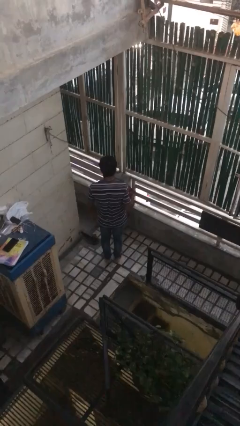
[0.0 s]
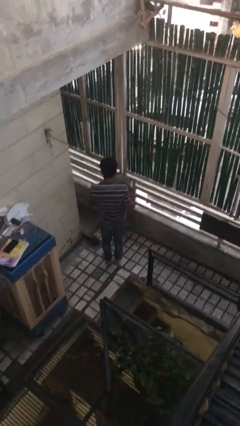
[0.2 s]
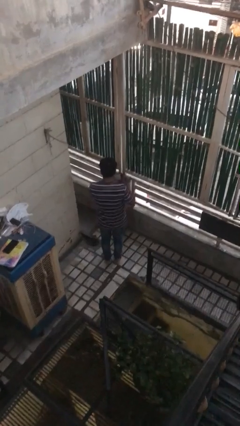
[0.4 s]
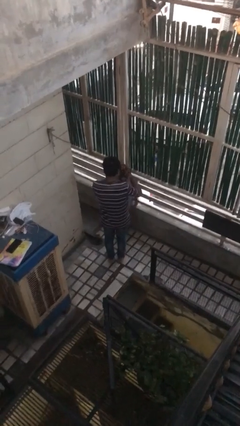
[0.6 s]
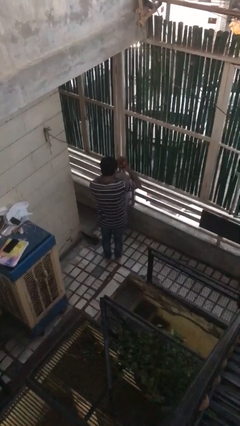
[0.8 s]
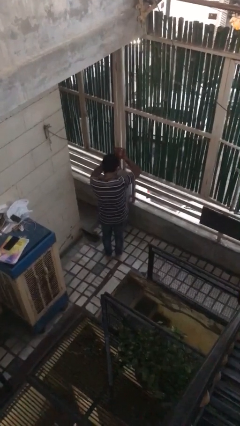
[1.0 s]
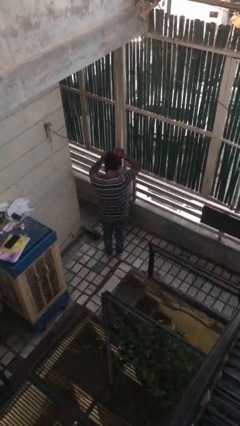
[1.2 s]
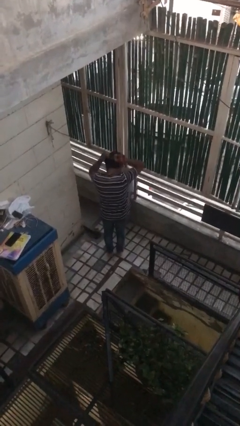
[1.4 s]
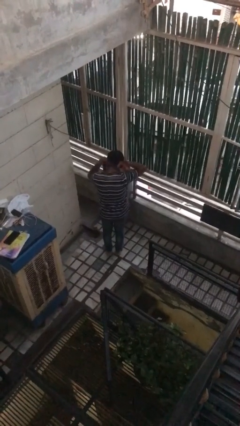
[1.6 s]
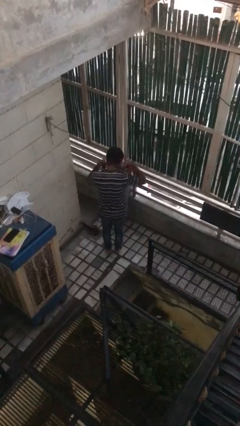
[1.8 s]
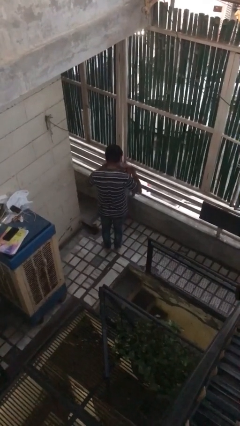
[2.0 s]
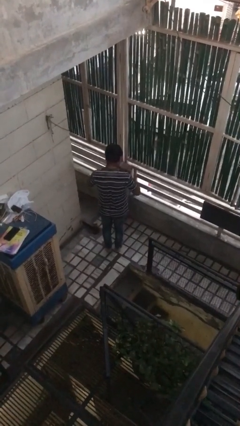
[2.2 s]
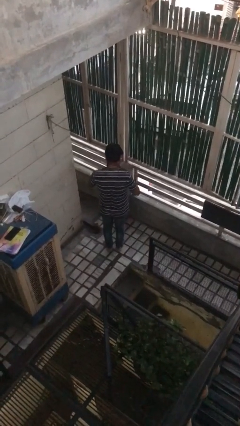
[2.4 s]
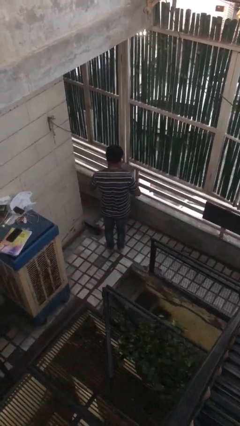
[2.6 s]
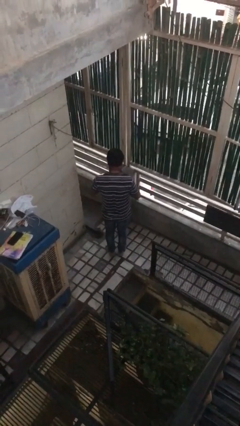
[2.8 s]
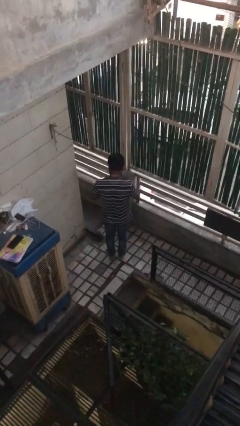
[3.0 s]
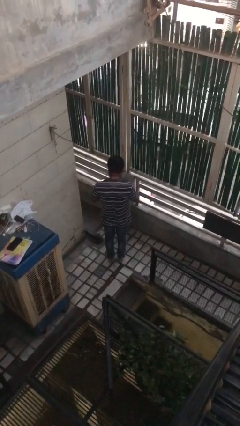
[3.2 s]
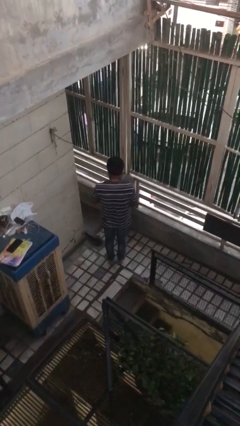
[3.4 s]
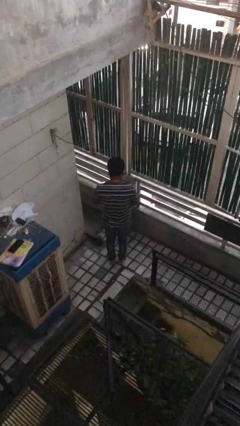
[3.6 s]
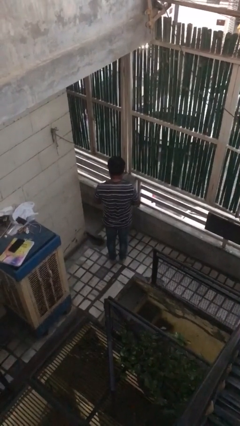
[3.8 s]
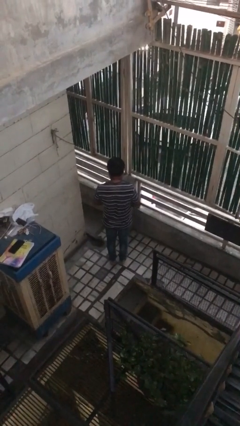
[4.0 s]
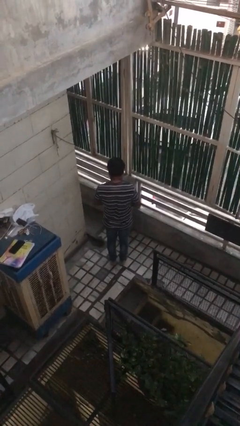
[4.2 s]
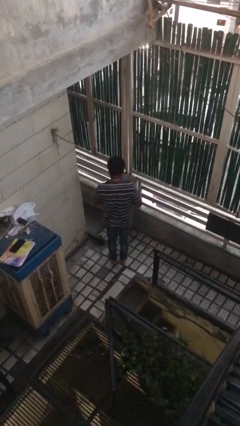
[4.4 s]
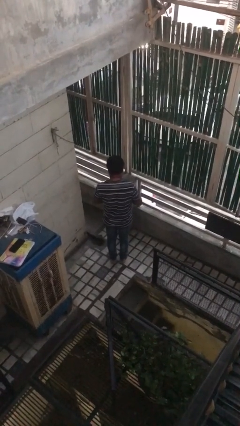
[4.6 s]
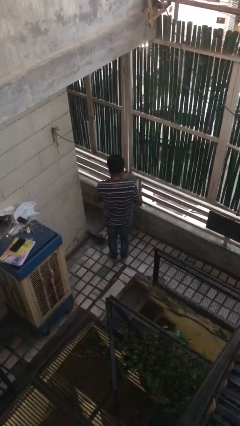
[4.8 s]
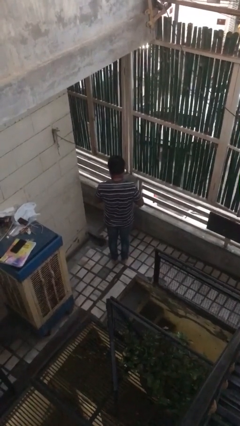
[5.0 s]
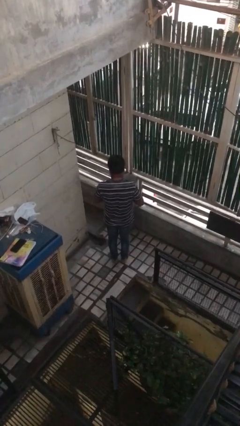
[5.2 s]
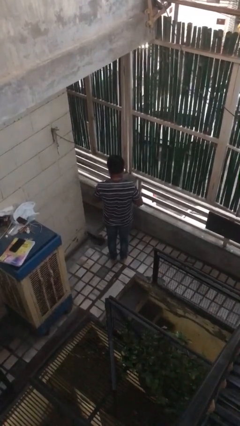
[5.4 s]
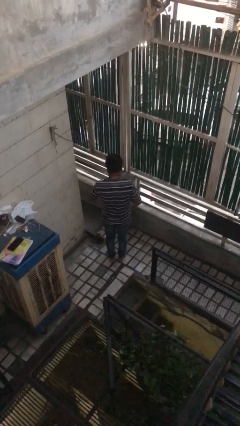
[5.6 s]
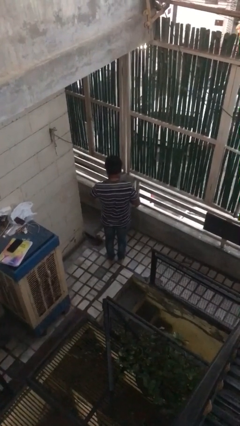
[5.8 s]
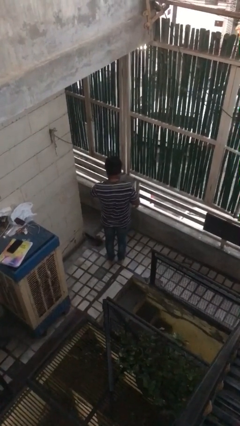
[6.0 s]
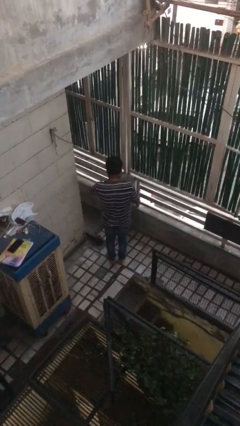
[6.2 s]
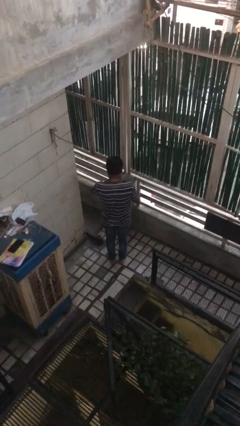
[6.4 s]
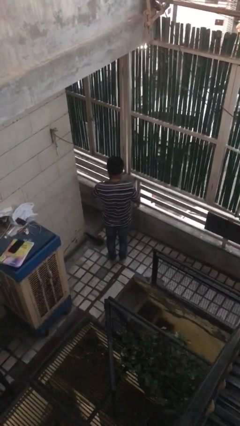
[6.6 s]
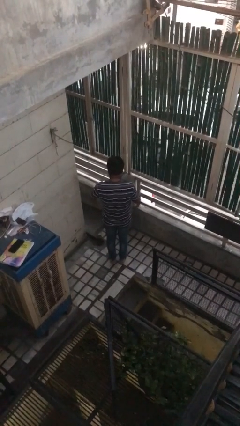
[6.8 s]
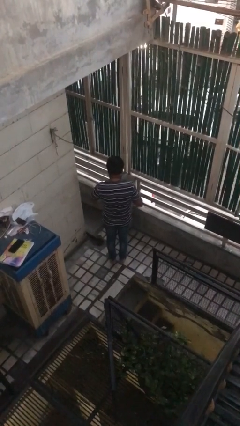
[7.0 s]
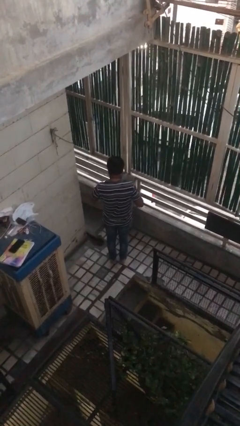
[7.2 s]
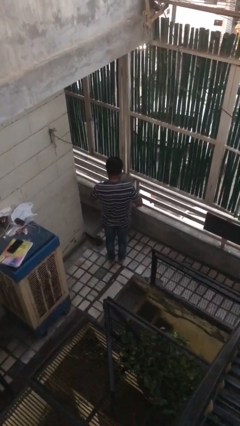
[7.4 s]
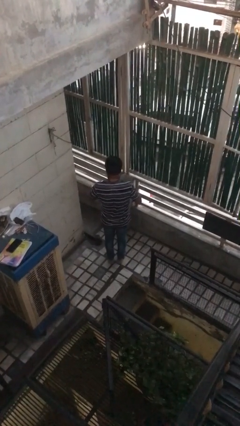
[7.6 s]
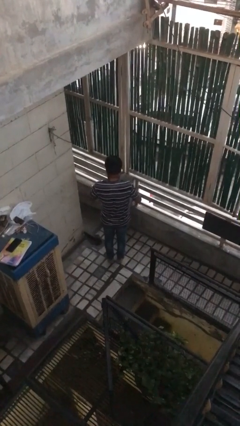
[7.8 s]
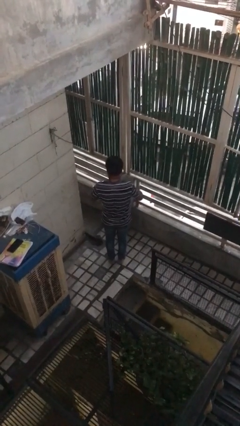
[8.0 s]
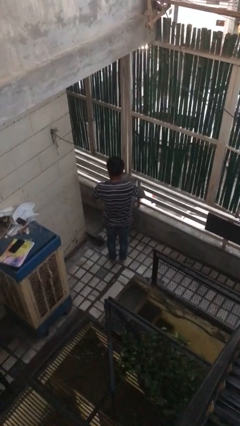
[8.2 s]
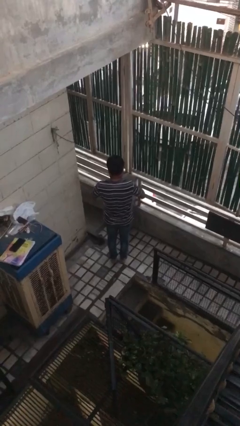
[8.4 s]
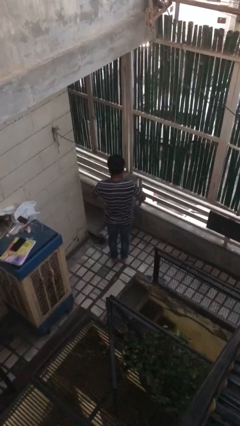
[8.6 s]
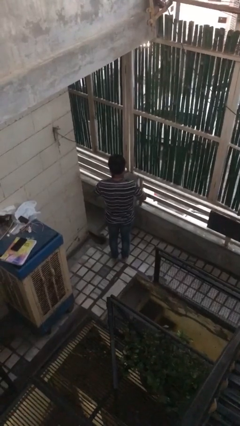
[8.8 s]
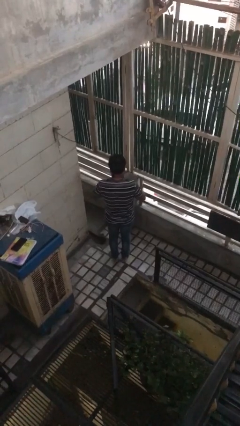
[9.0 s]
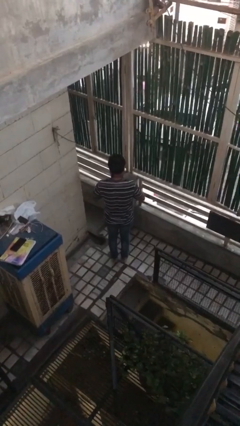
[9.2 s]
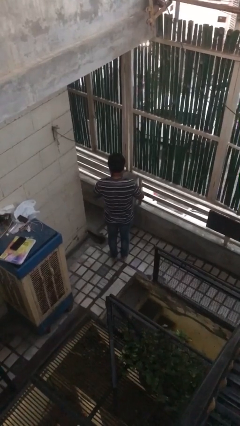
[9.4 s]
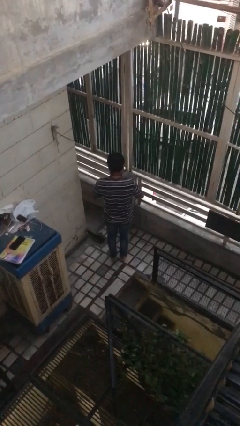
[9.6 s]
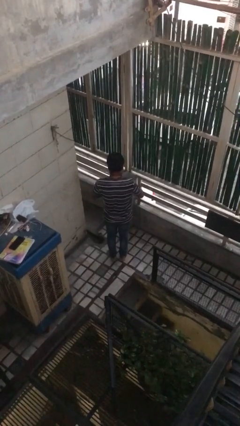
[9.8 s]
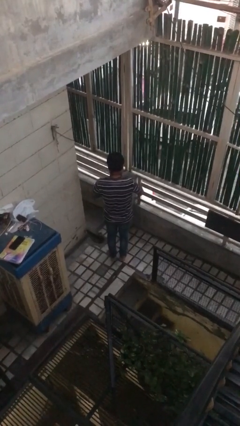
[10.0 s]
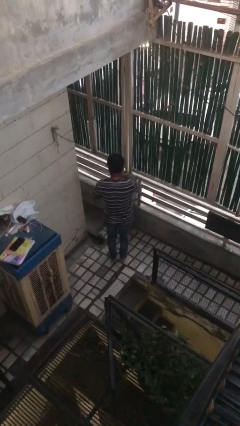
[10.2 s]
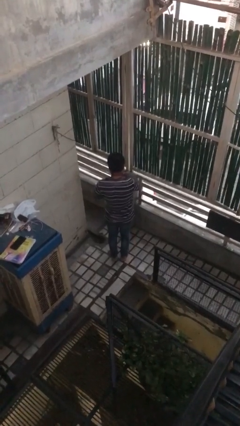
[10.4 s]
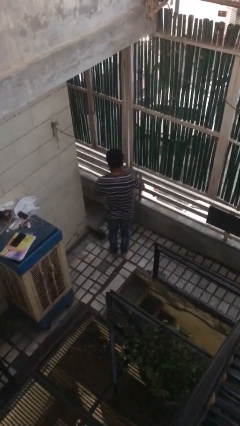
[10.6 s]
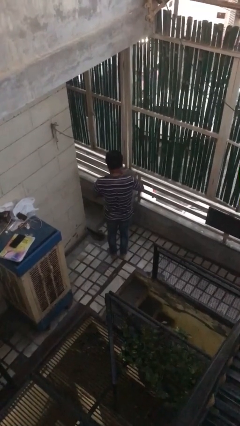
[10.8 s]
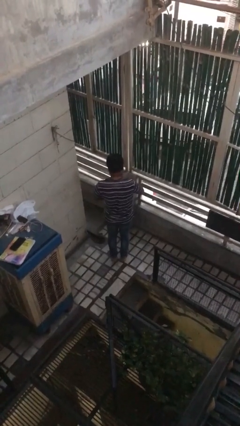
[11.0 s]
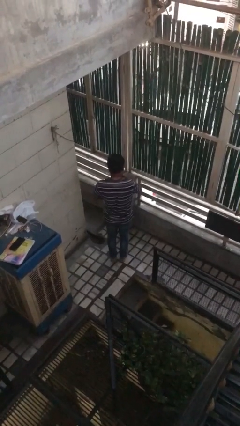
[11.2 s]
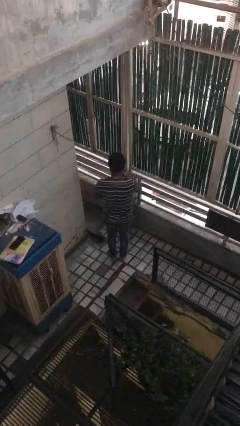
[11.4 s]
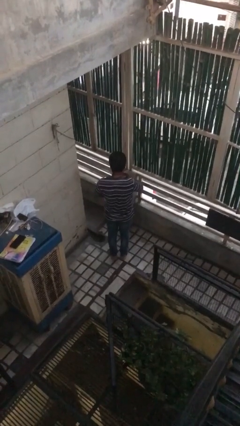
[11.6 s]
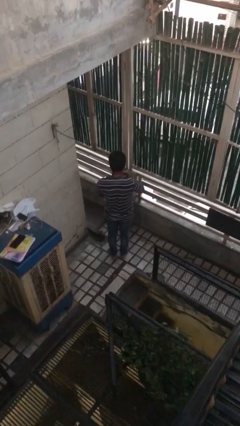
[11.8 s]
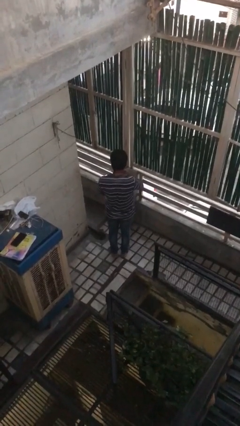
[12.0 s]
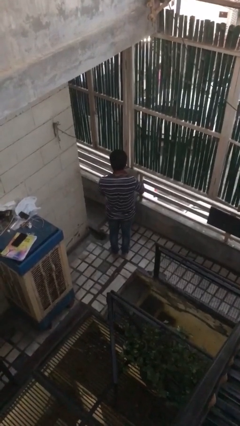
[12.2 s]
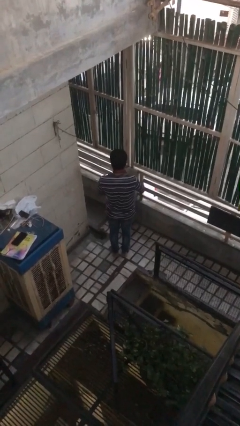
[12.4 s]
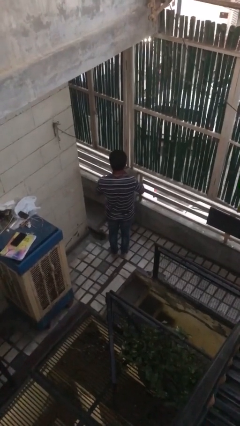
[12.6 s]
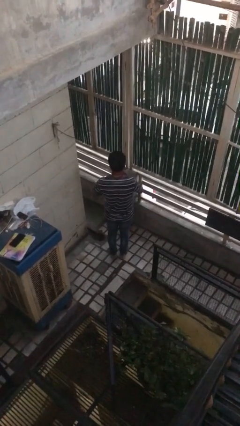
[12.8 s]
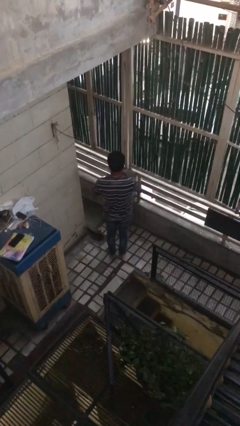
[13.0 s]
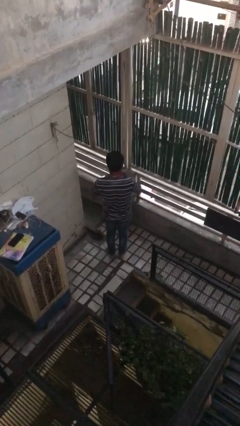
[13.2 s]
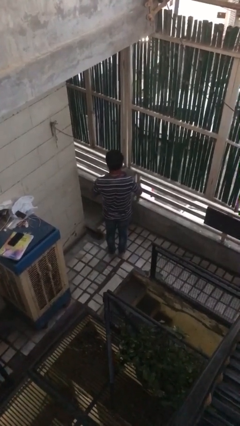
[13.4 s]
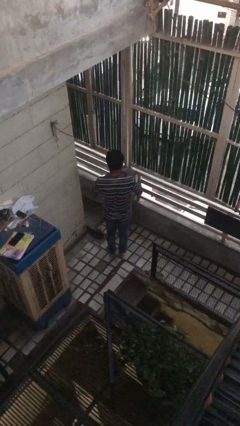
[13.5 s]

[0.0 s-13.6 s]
person puts on necktie

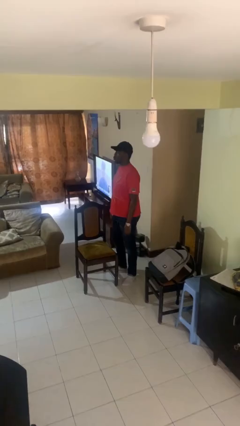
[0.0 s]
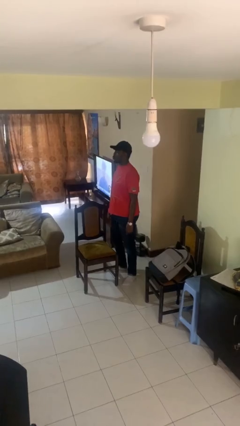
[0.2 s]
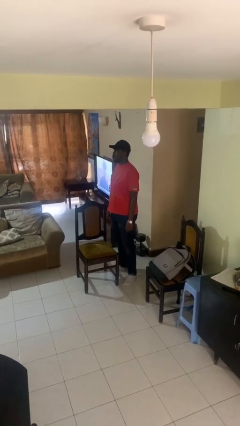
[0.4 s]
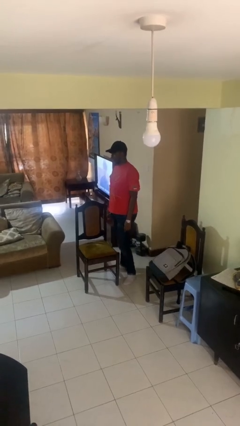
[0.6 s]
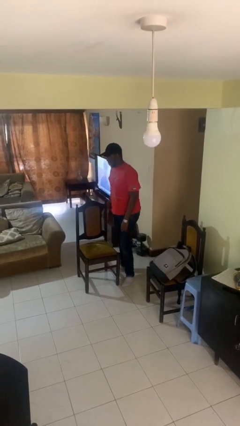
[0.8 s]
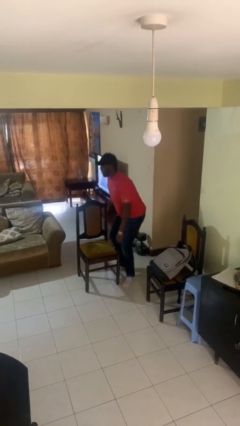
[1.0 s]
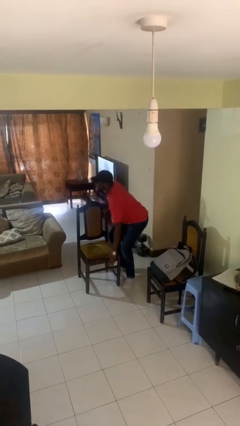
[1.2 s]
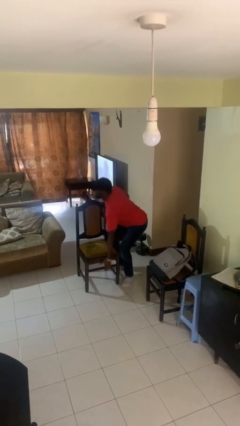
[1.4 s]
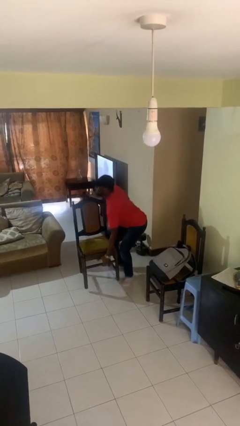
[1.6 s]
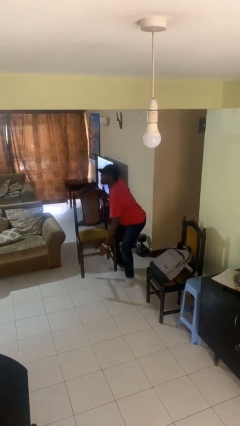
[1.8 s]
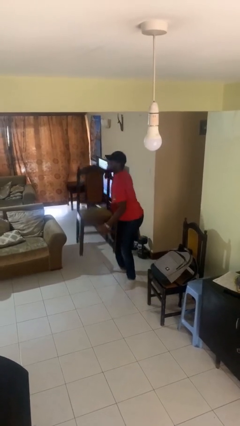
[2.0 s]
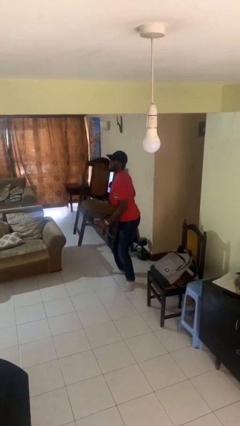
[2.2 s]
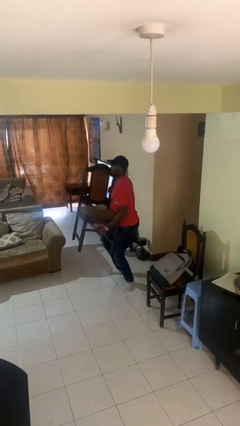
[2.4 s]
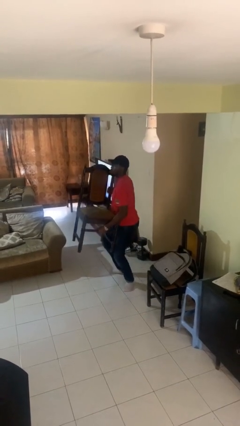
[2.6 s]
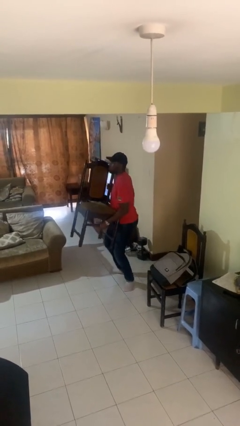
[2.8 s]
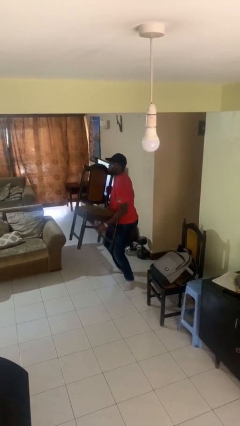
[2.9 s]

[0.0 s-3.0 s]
person picks up object from floor

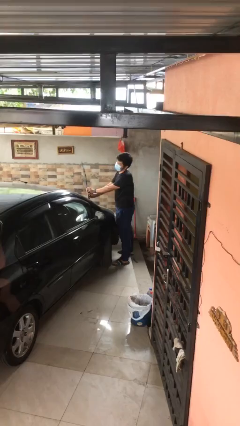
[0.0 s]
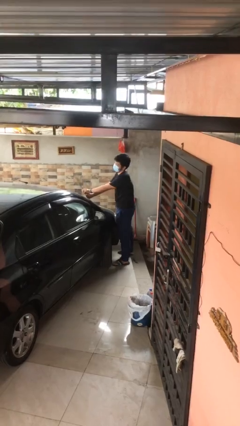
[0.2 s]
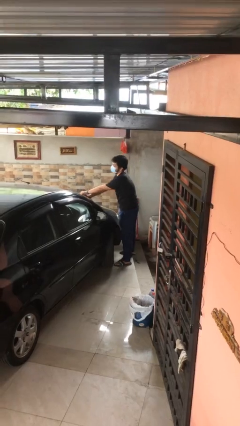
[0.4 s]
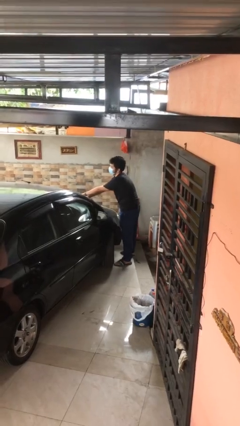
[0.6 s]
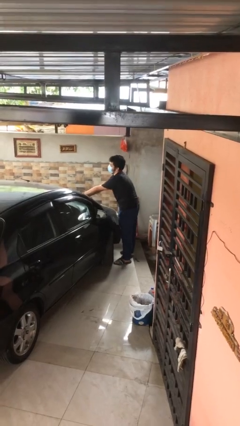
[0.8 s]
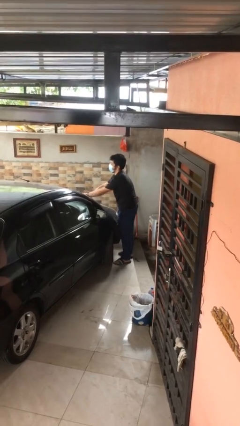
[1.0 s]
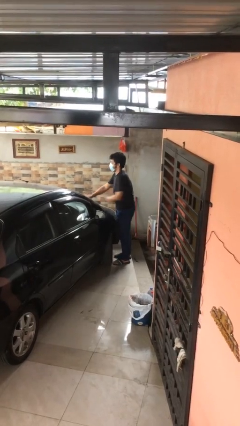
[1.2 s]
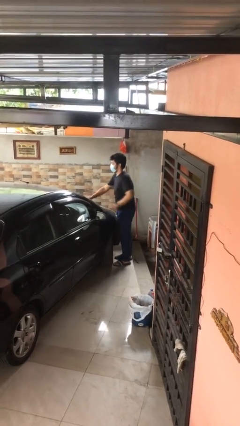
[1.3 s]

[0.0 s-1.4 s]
person flips down car wipers
